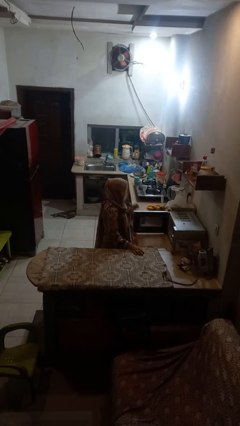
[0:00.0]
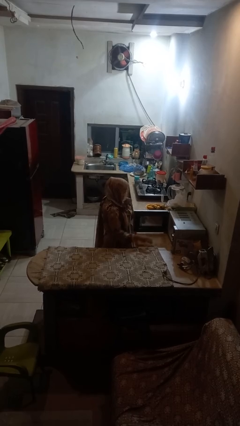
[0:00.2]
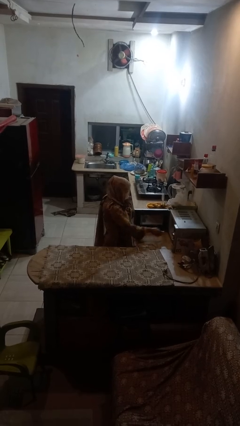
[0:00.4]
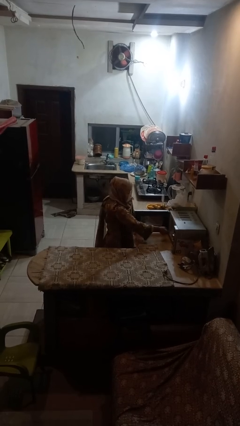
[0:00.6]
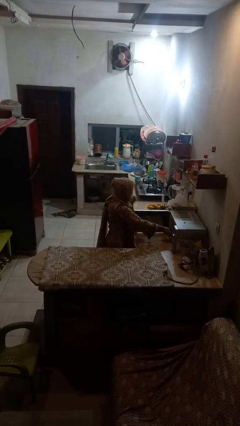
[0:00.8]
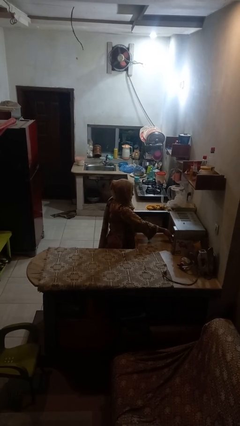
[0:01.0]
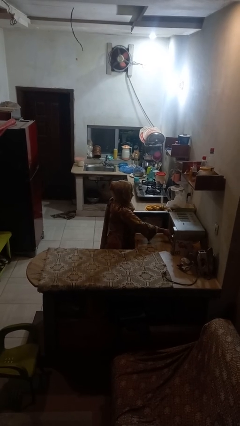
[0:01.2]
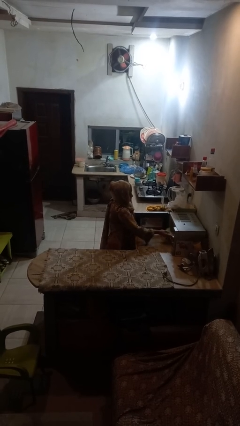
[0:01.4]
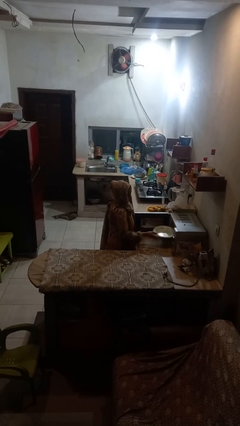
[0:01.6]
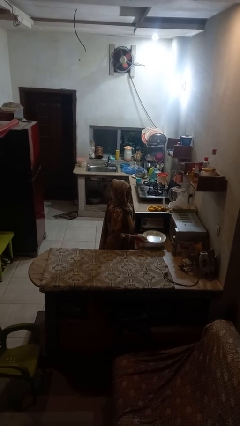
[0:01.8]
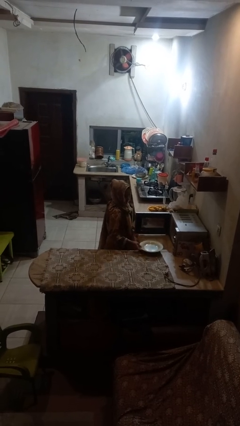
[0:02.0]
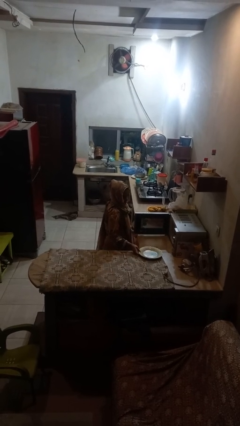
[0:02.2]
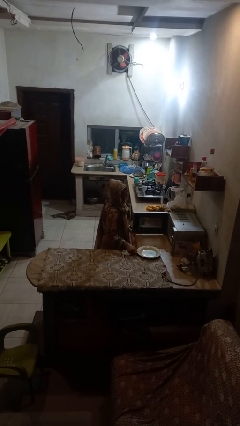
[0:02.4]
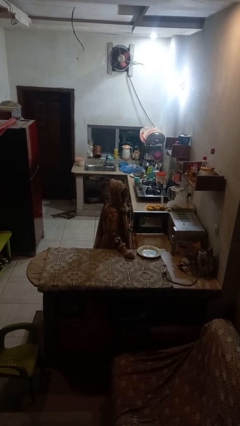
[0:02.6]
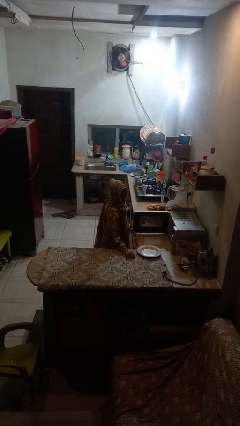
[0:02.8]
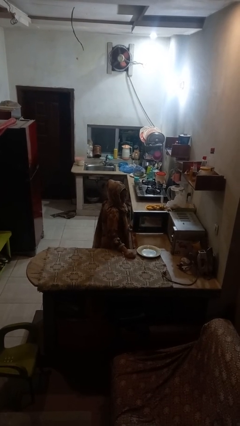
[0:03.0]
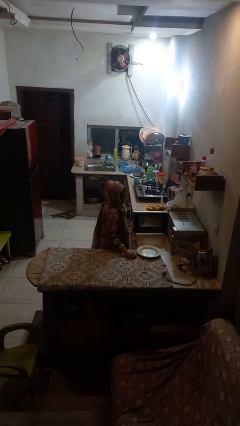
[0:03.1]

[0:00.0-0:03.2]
person takes object from microwave

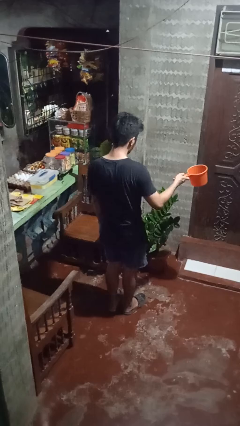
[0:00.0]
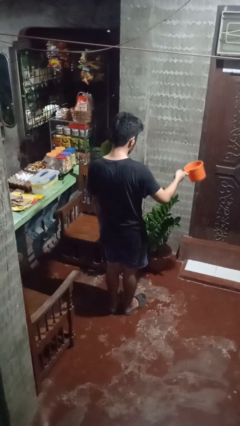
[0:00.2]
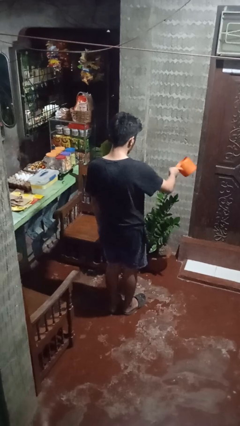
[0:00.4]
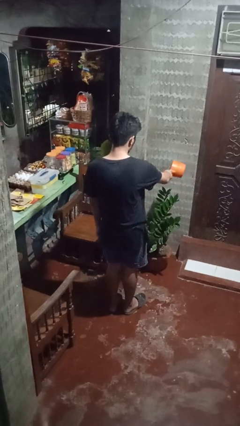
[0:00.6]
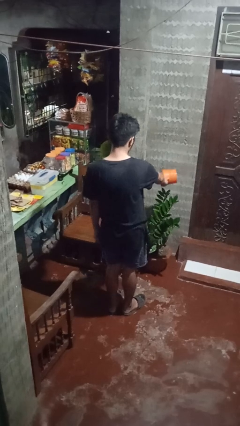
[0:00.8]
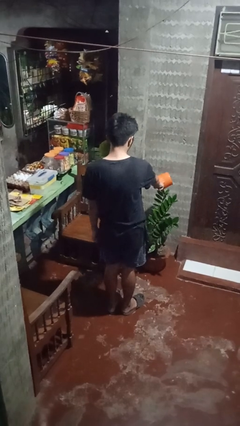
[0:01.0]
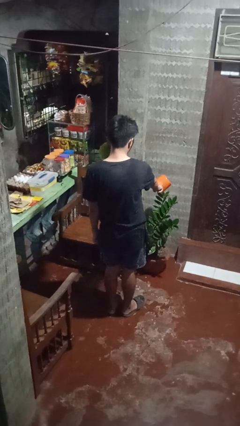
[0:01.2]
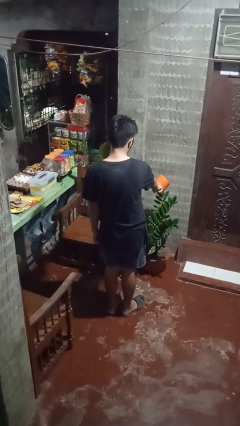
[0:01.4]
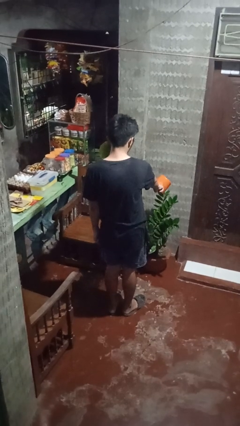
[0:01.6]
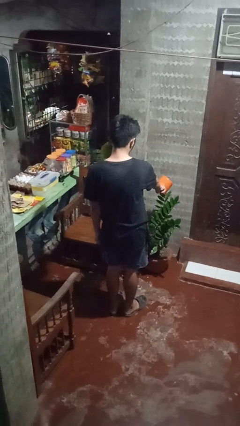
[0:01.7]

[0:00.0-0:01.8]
person waters houseplant

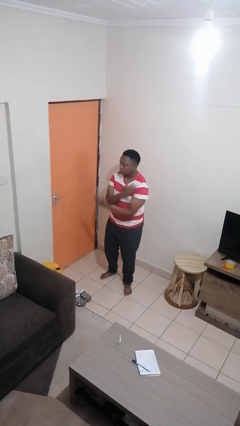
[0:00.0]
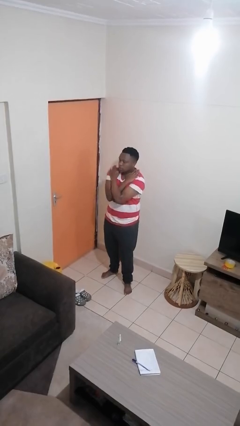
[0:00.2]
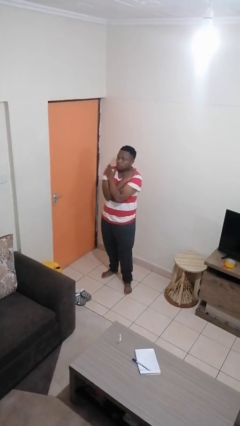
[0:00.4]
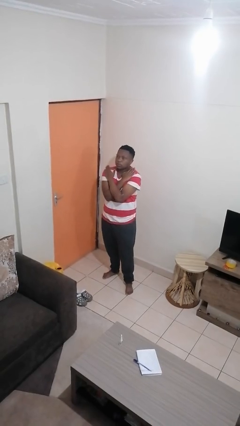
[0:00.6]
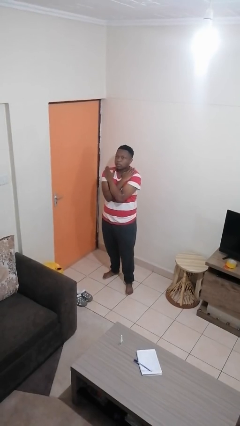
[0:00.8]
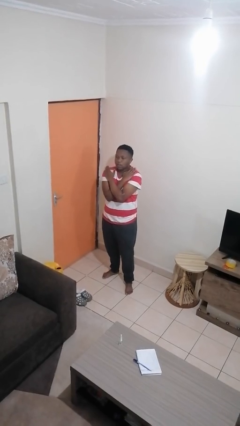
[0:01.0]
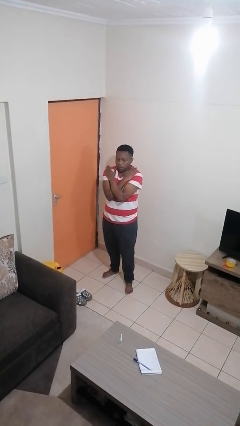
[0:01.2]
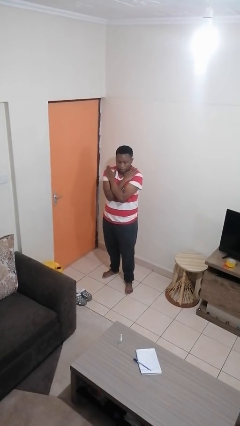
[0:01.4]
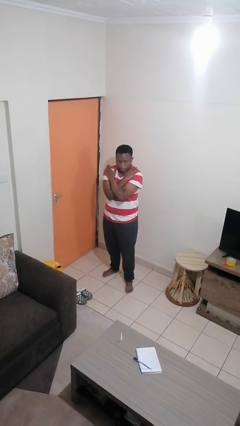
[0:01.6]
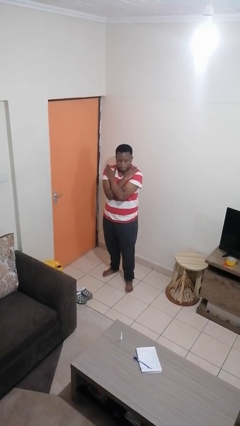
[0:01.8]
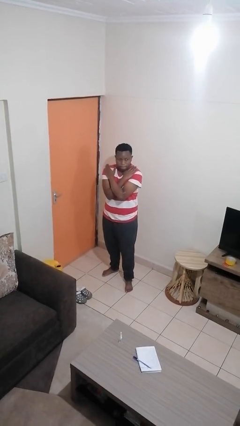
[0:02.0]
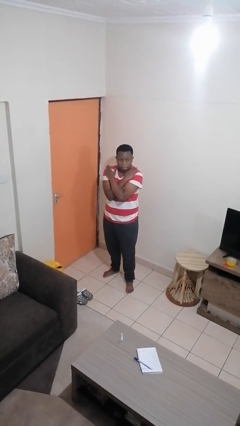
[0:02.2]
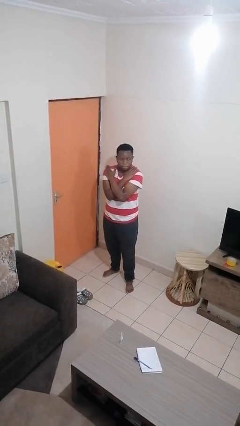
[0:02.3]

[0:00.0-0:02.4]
person gestures arms x

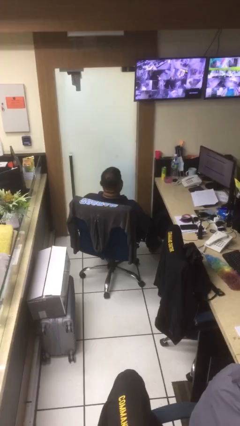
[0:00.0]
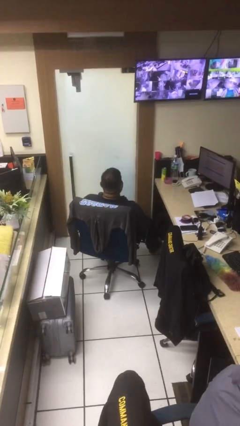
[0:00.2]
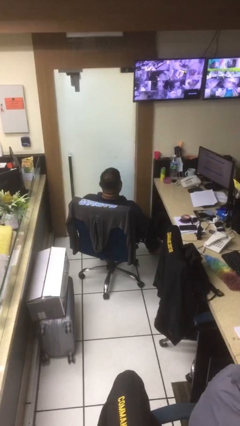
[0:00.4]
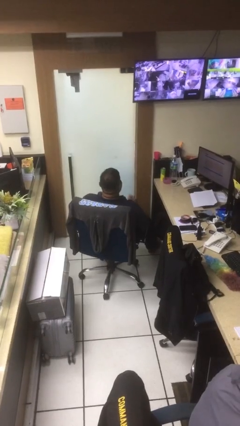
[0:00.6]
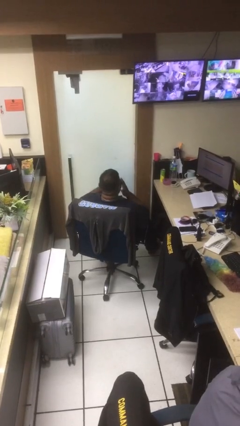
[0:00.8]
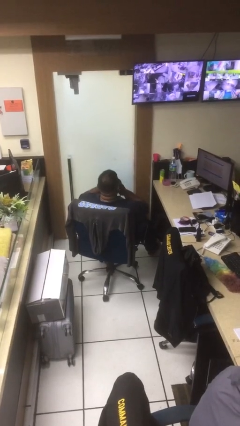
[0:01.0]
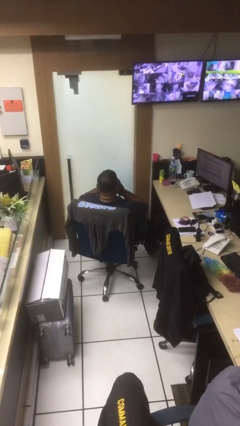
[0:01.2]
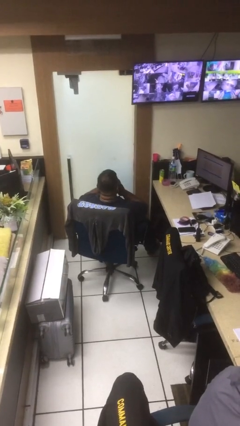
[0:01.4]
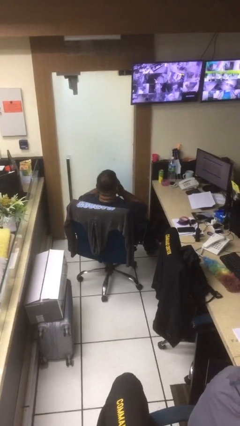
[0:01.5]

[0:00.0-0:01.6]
person covers face with hands

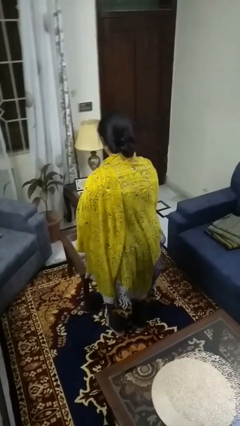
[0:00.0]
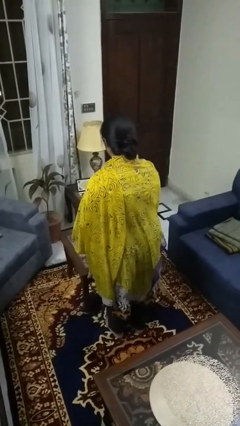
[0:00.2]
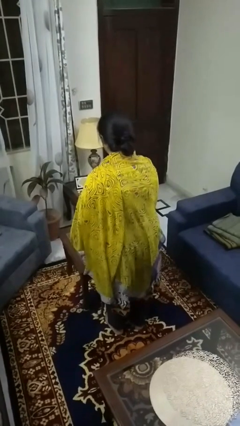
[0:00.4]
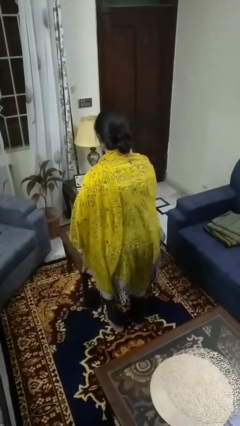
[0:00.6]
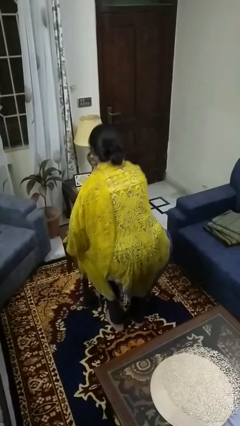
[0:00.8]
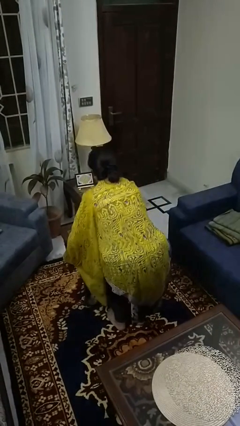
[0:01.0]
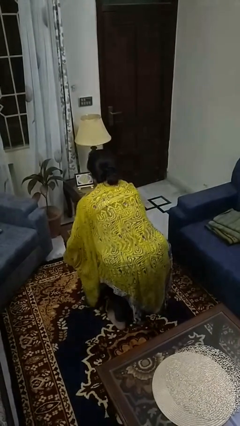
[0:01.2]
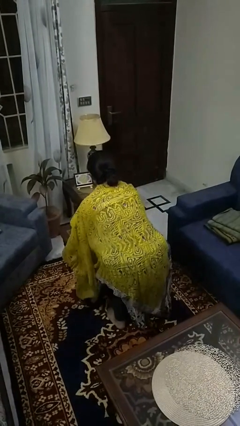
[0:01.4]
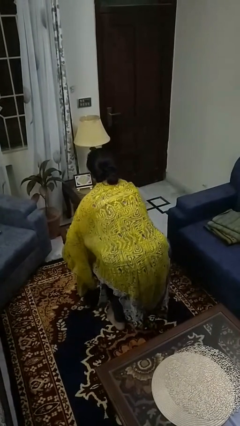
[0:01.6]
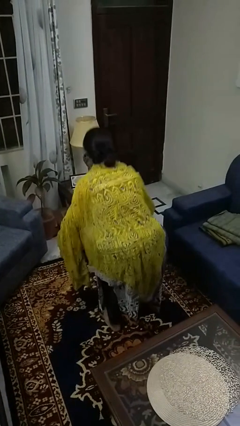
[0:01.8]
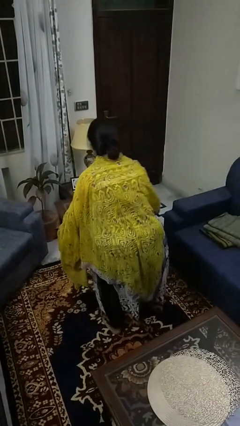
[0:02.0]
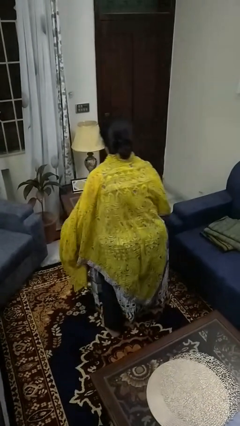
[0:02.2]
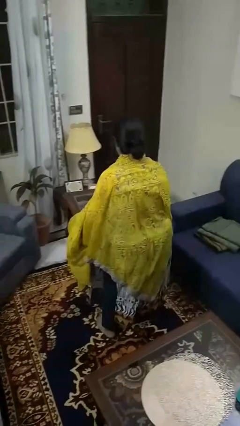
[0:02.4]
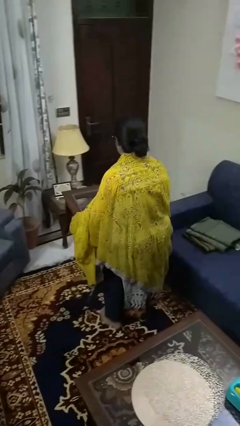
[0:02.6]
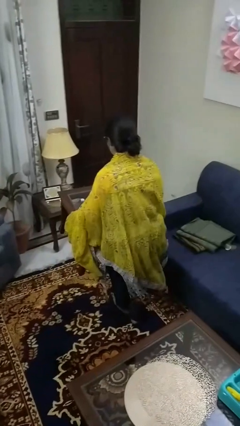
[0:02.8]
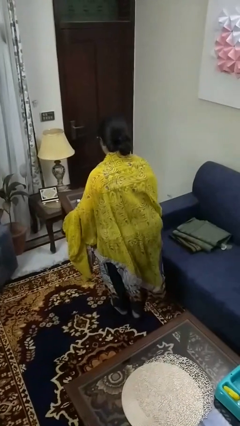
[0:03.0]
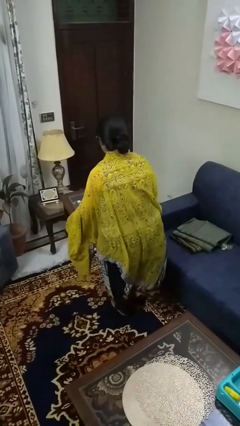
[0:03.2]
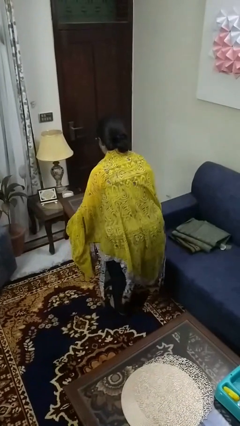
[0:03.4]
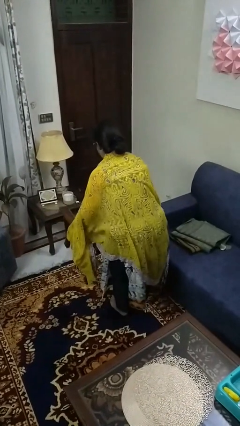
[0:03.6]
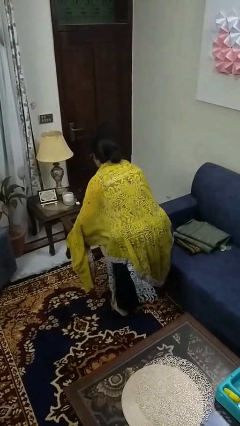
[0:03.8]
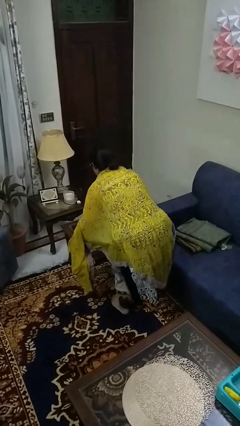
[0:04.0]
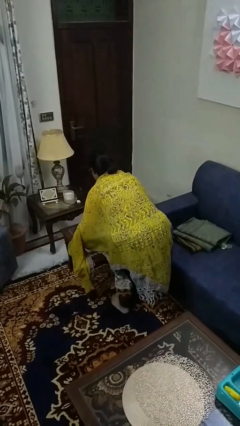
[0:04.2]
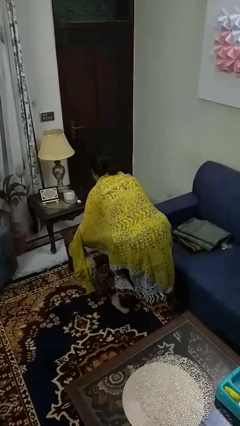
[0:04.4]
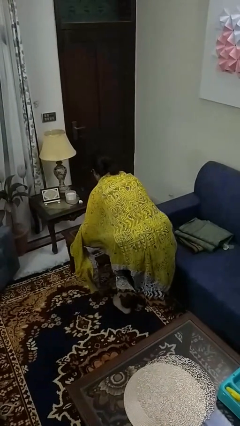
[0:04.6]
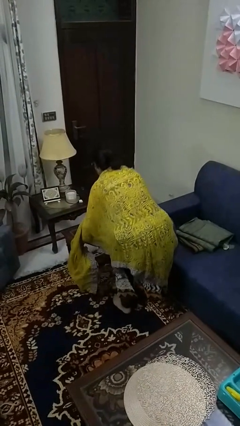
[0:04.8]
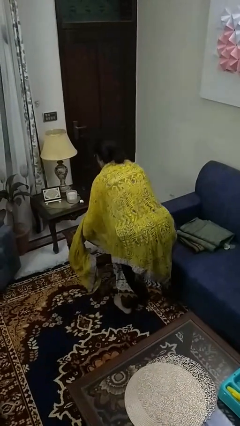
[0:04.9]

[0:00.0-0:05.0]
person carries furniture

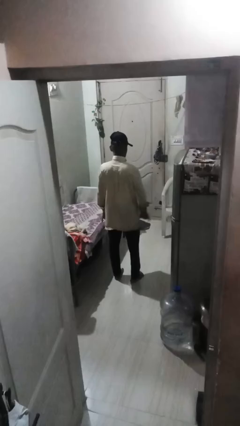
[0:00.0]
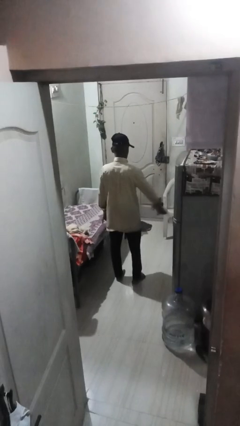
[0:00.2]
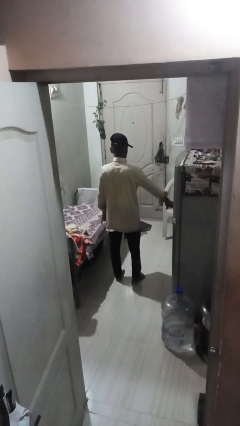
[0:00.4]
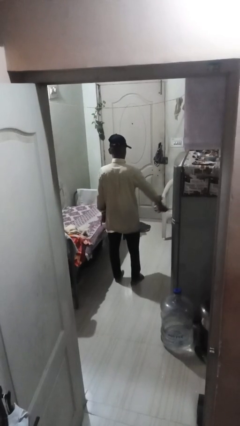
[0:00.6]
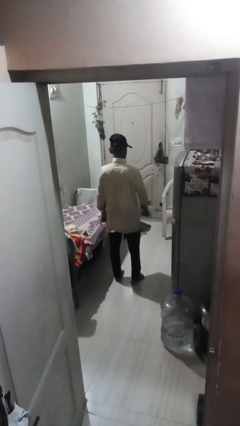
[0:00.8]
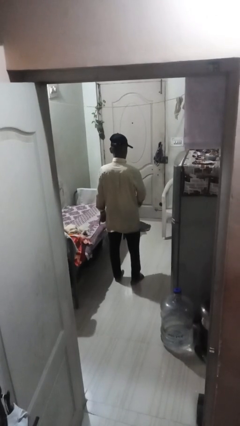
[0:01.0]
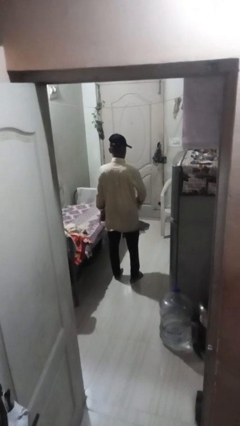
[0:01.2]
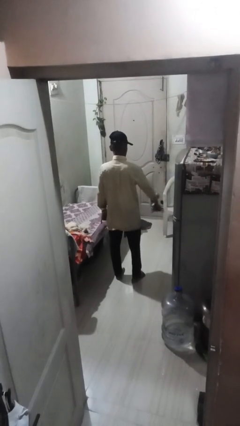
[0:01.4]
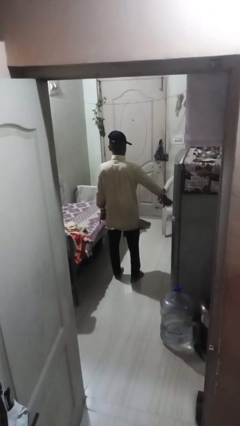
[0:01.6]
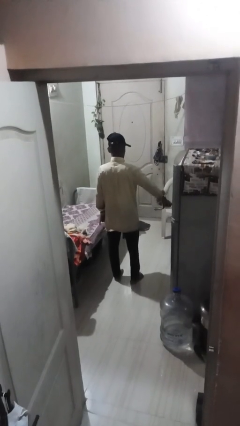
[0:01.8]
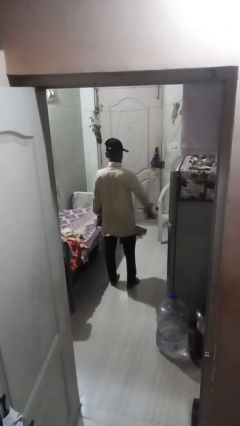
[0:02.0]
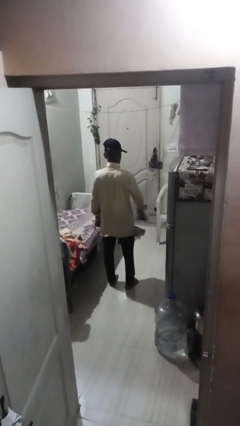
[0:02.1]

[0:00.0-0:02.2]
person gestures hang loose

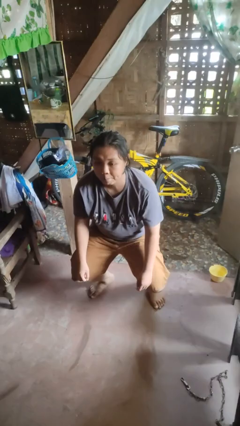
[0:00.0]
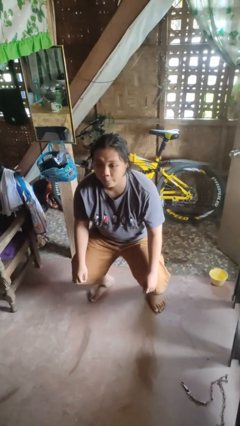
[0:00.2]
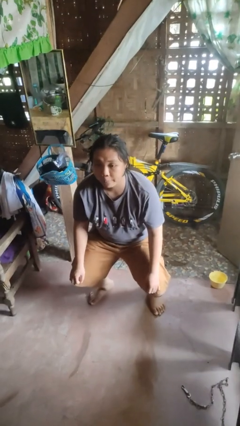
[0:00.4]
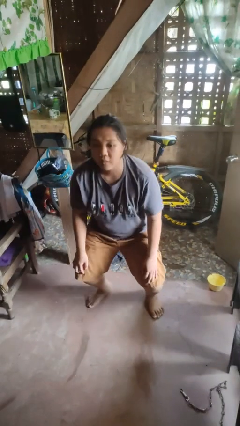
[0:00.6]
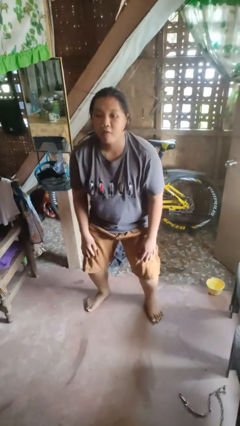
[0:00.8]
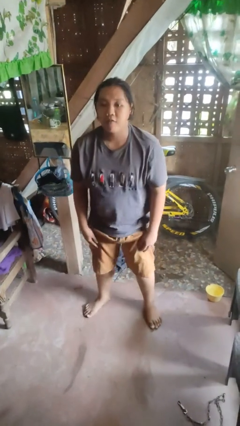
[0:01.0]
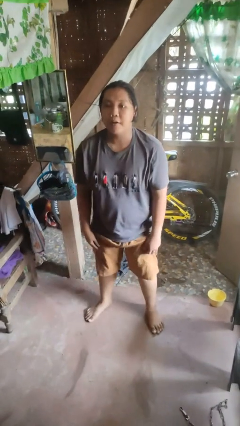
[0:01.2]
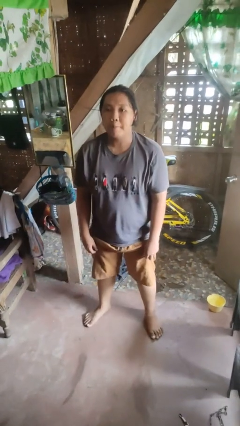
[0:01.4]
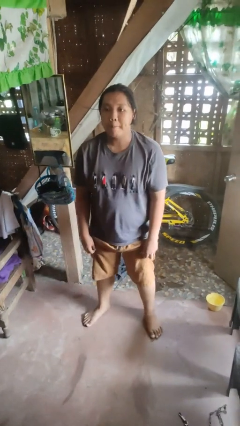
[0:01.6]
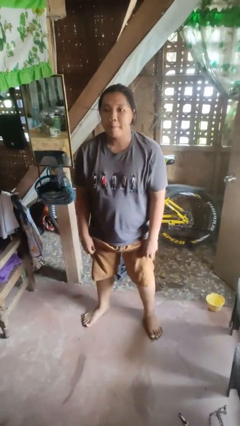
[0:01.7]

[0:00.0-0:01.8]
person stands up
